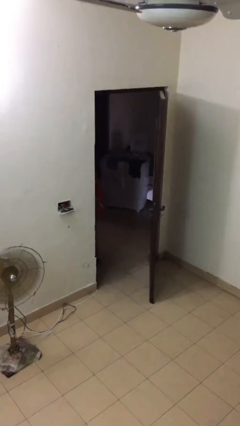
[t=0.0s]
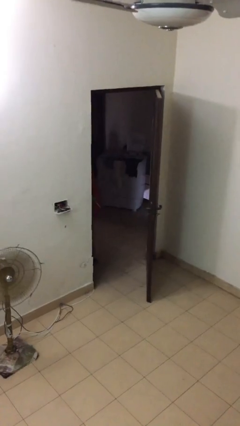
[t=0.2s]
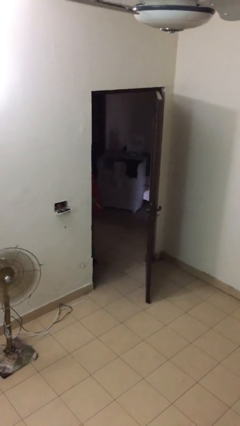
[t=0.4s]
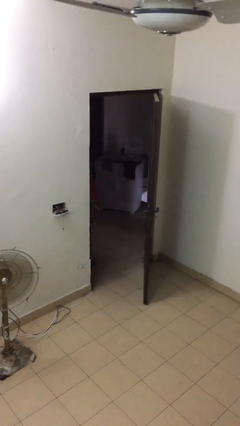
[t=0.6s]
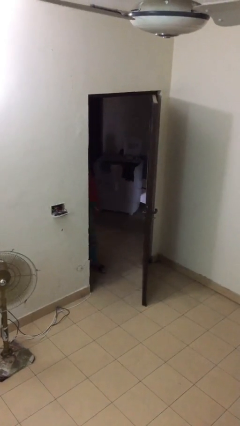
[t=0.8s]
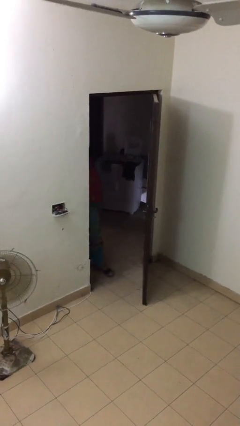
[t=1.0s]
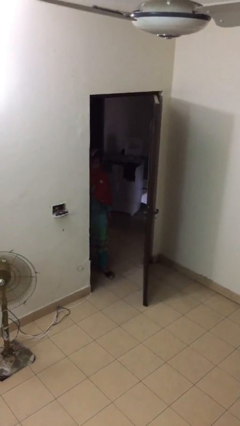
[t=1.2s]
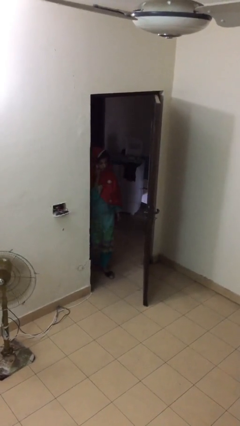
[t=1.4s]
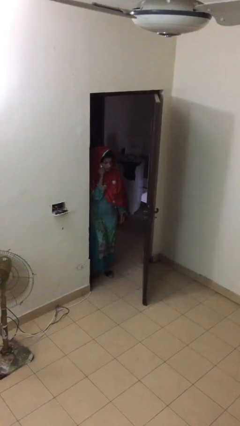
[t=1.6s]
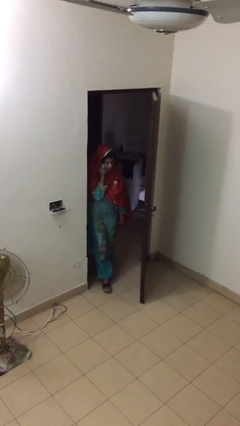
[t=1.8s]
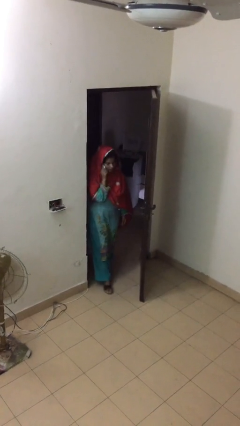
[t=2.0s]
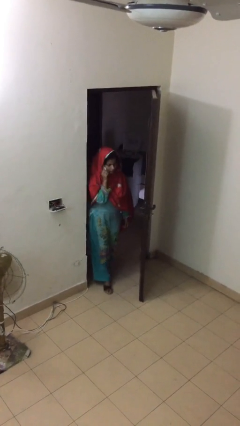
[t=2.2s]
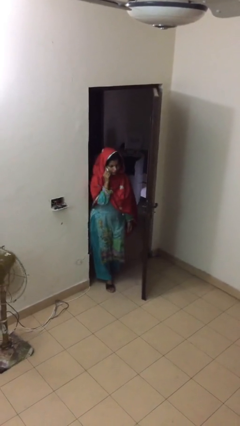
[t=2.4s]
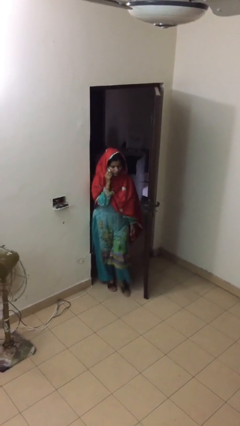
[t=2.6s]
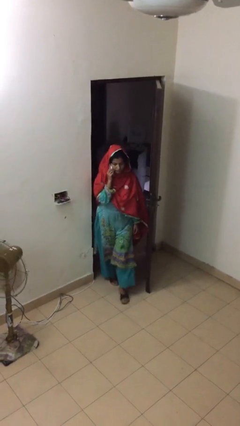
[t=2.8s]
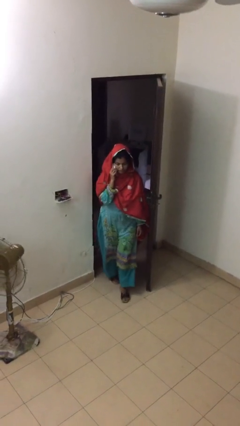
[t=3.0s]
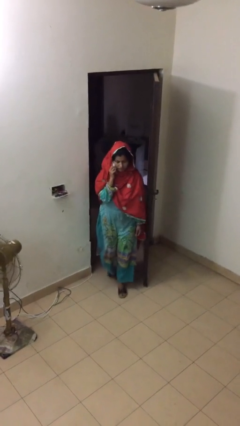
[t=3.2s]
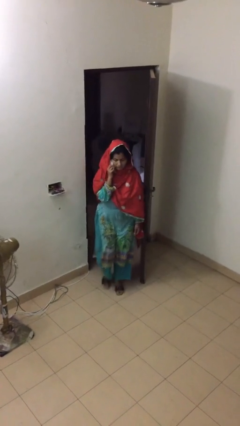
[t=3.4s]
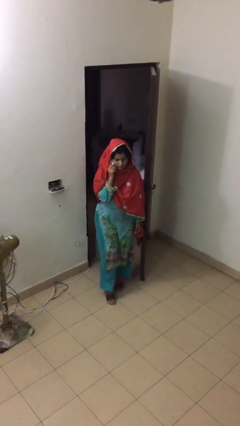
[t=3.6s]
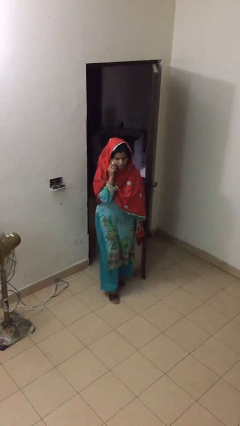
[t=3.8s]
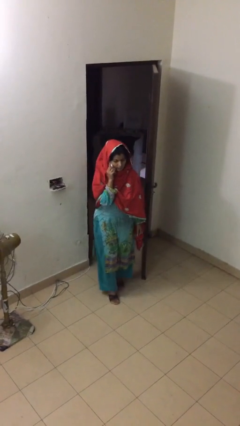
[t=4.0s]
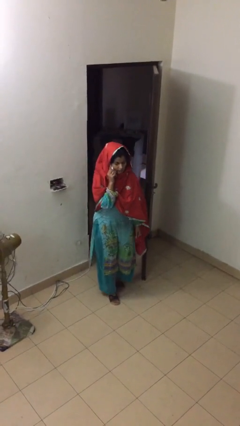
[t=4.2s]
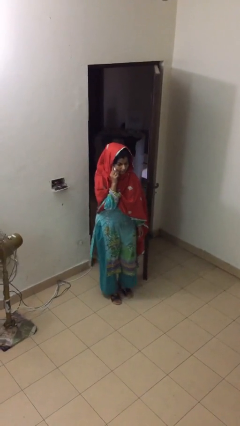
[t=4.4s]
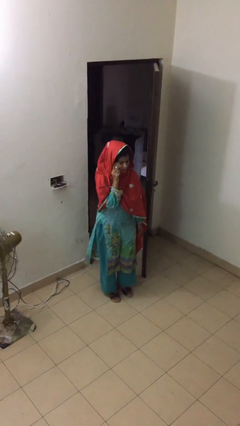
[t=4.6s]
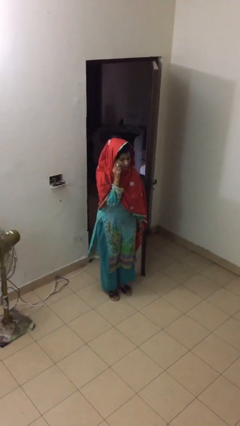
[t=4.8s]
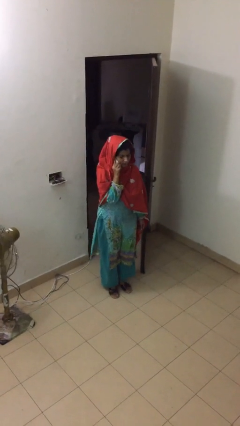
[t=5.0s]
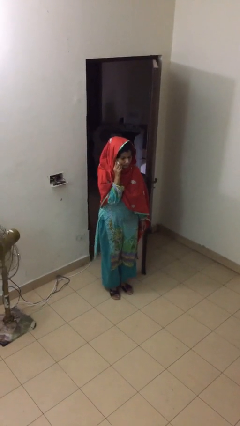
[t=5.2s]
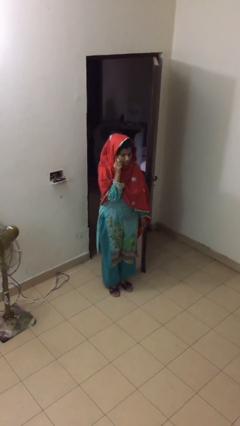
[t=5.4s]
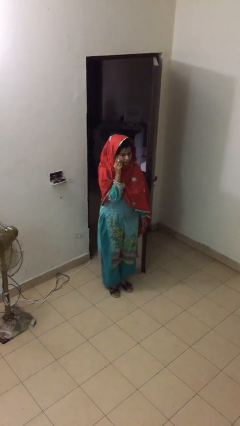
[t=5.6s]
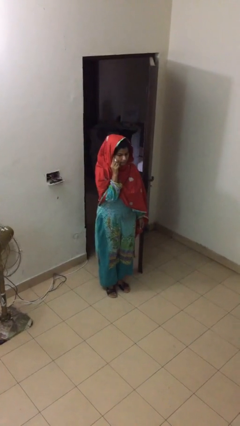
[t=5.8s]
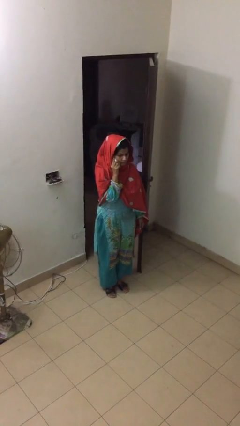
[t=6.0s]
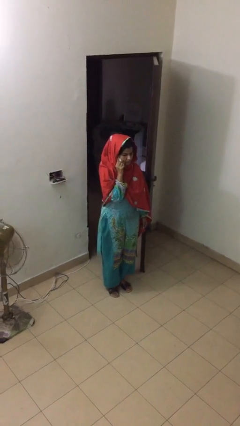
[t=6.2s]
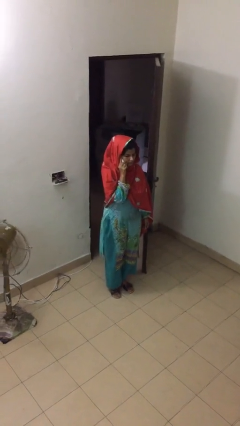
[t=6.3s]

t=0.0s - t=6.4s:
person enters scene through structure

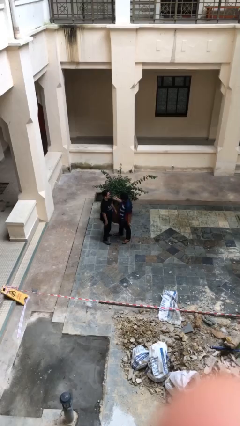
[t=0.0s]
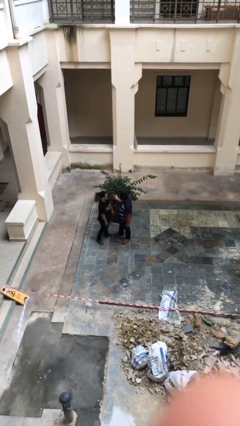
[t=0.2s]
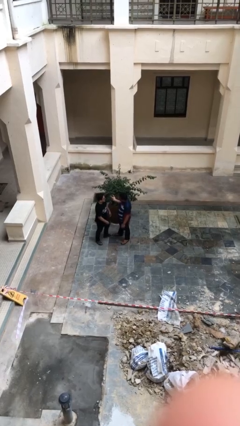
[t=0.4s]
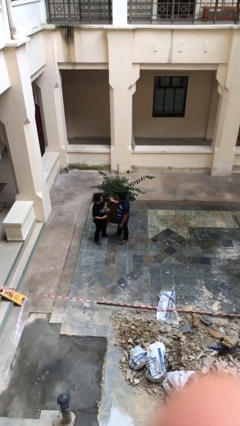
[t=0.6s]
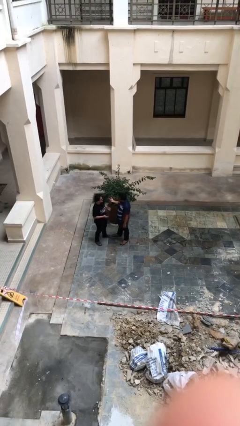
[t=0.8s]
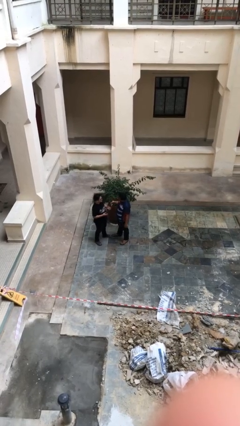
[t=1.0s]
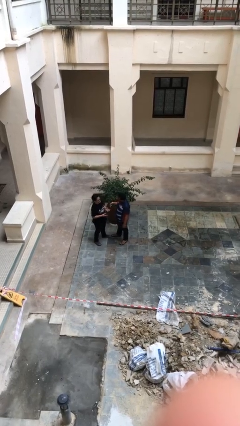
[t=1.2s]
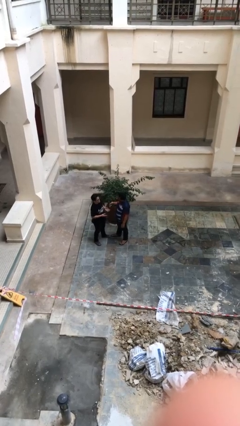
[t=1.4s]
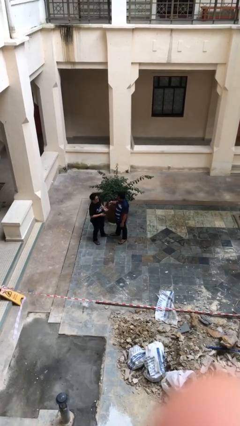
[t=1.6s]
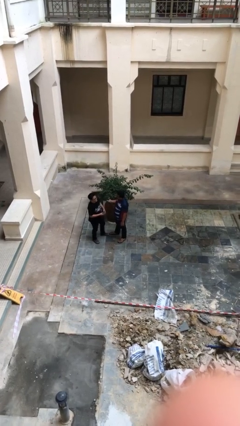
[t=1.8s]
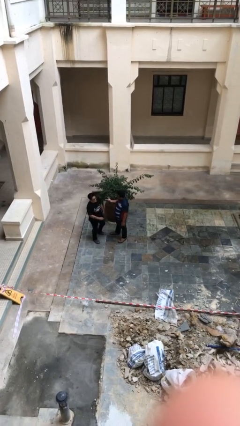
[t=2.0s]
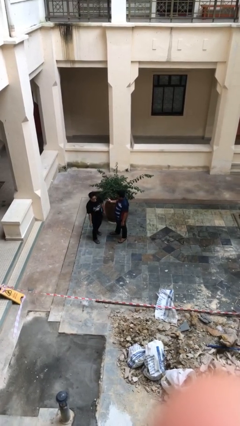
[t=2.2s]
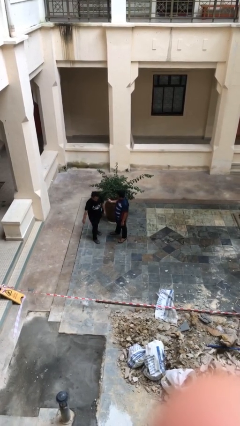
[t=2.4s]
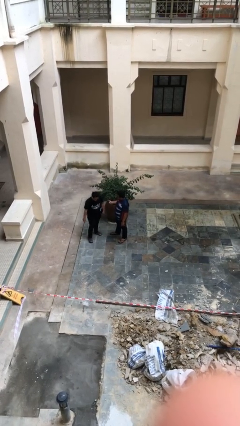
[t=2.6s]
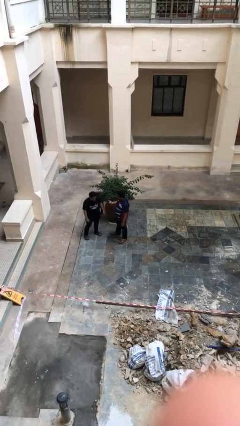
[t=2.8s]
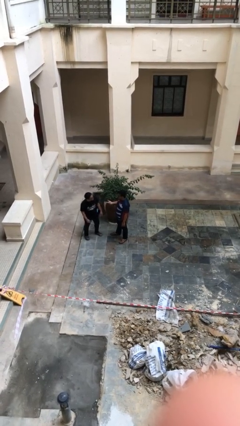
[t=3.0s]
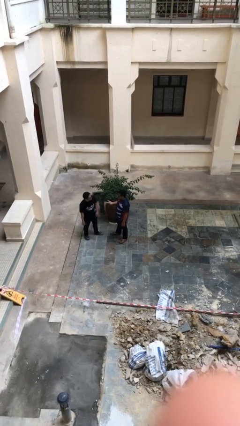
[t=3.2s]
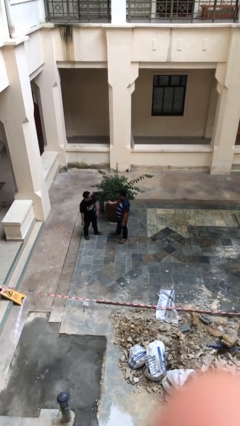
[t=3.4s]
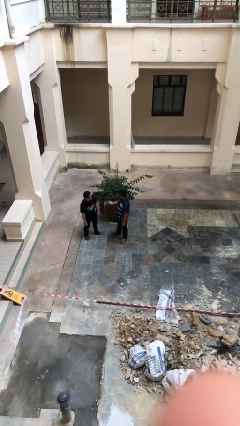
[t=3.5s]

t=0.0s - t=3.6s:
person talks to person

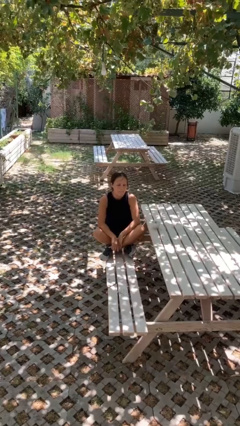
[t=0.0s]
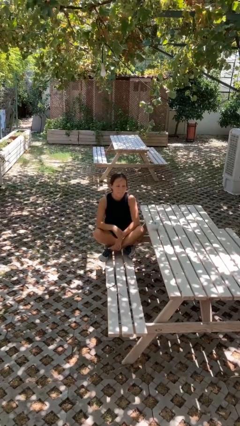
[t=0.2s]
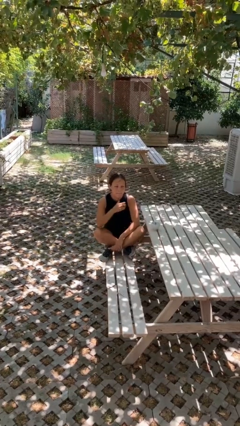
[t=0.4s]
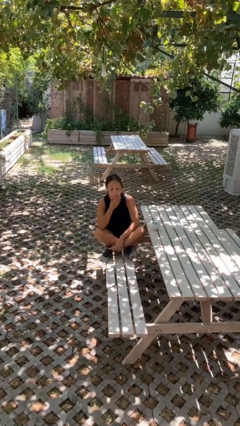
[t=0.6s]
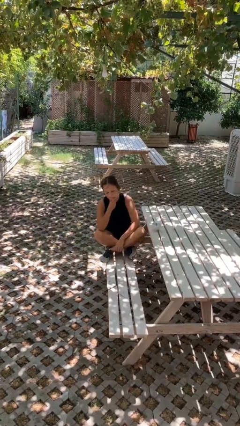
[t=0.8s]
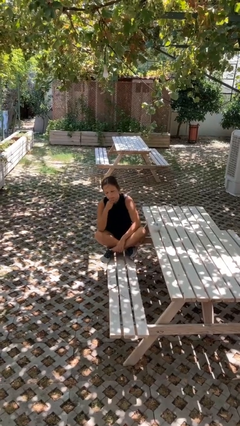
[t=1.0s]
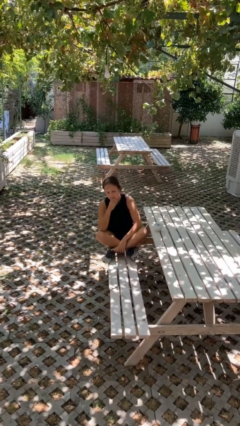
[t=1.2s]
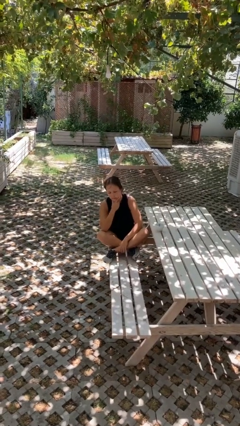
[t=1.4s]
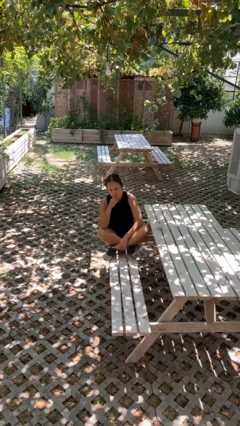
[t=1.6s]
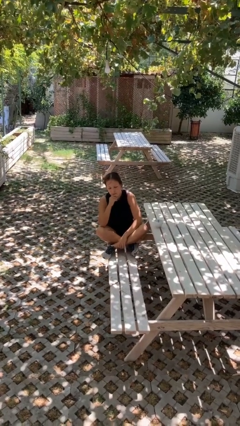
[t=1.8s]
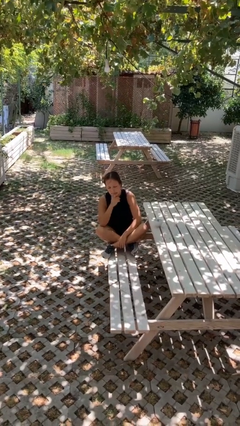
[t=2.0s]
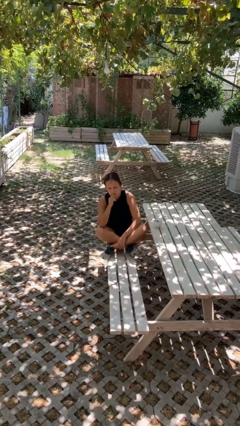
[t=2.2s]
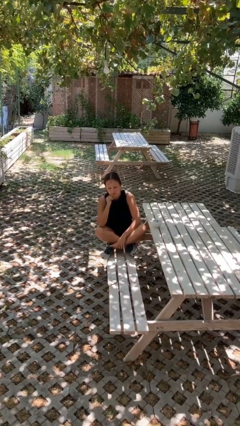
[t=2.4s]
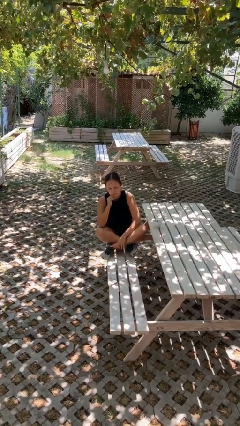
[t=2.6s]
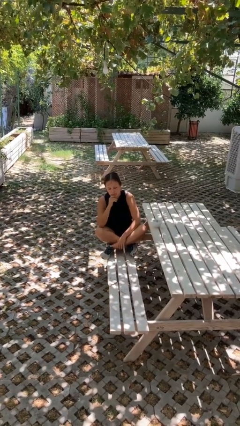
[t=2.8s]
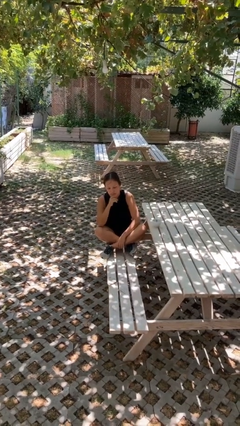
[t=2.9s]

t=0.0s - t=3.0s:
person strokes chin

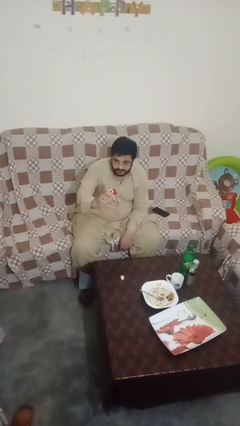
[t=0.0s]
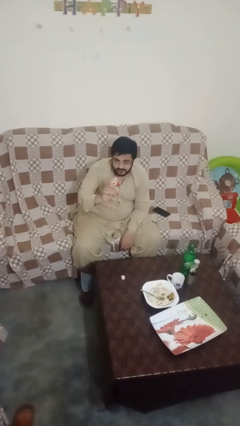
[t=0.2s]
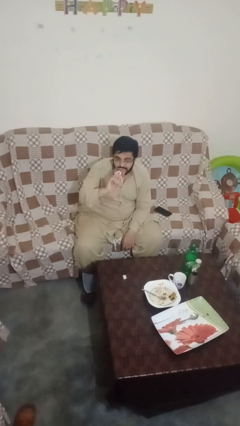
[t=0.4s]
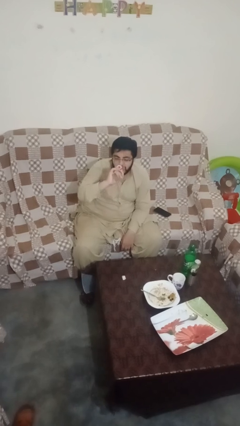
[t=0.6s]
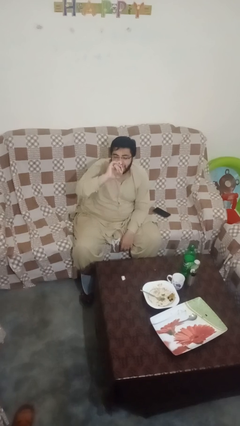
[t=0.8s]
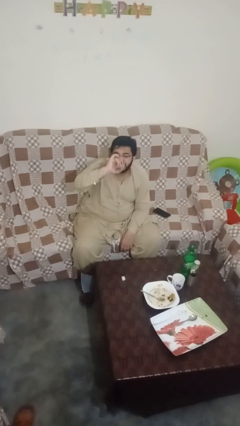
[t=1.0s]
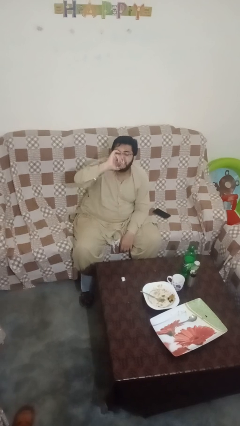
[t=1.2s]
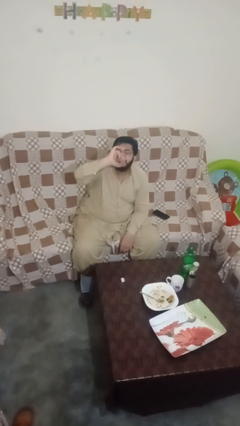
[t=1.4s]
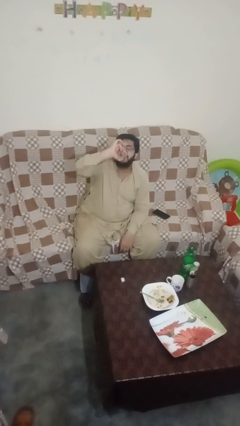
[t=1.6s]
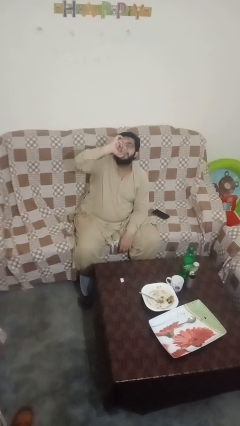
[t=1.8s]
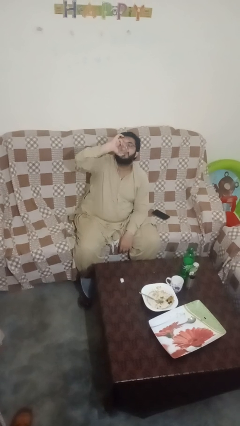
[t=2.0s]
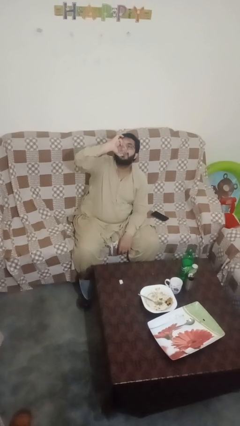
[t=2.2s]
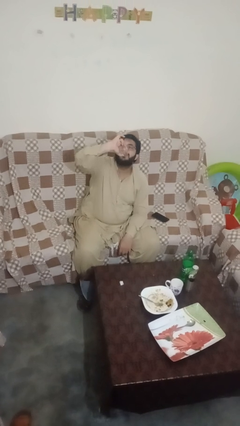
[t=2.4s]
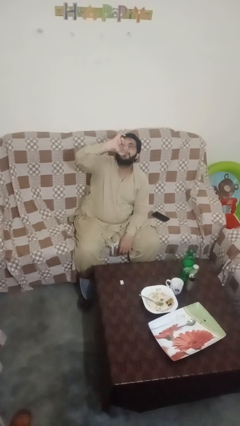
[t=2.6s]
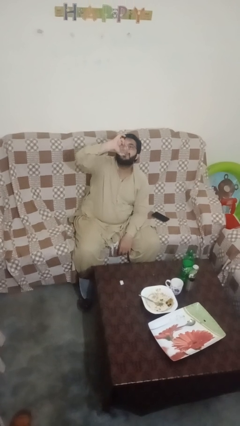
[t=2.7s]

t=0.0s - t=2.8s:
person drinks from shotglass

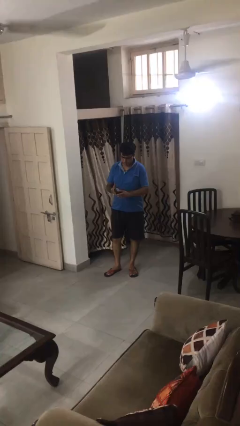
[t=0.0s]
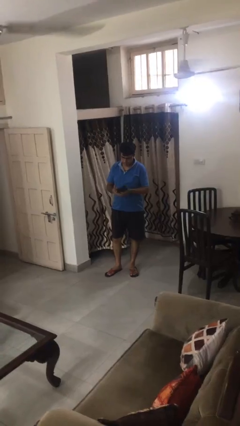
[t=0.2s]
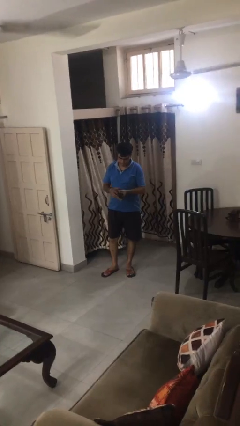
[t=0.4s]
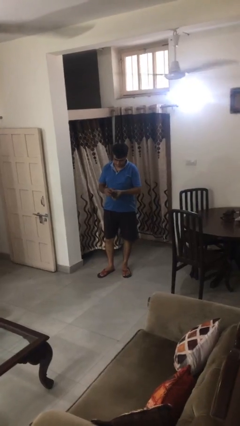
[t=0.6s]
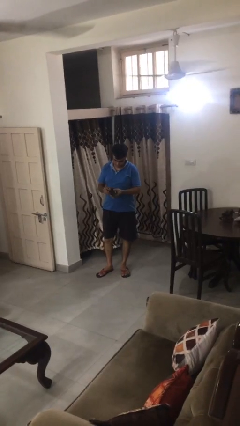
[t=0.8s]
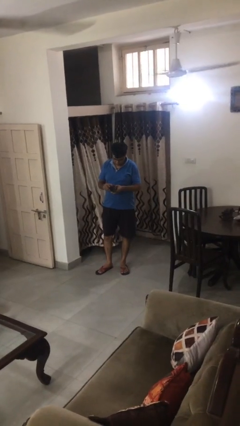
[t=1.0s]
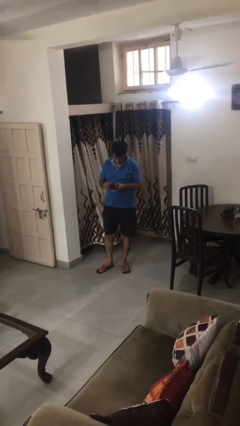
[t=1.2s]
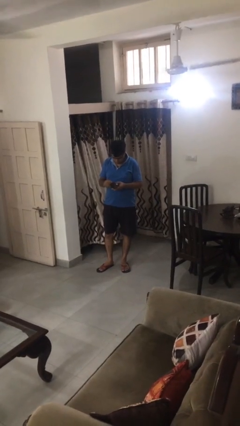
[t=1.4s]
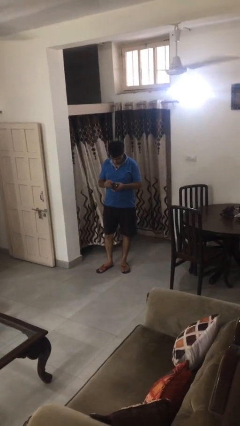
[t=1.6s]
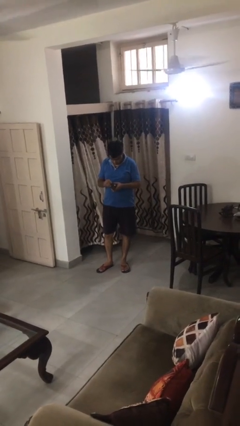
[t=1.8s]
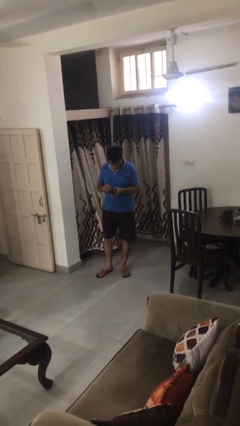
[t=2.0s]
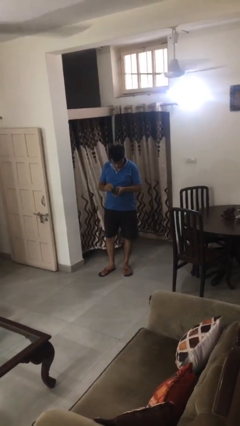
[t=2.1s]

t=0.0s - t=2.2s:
person searches in purse
